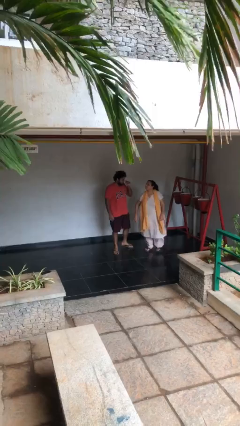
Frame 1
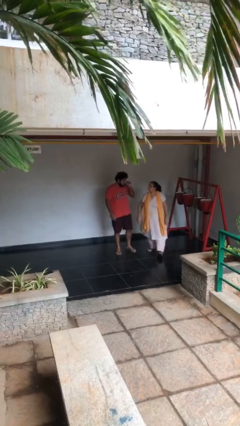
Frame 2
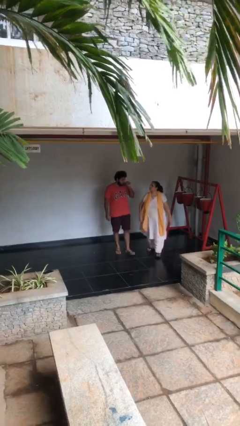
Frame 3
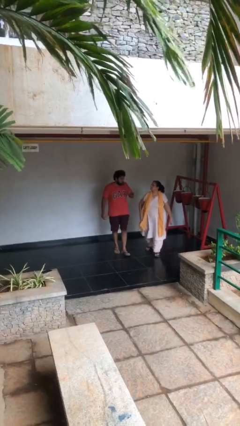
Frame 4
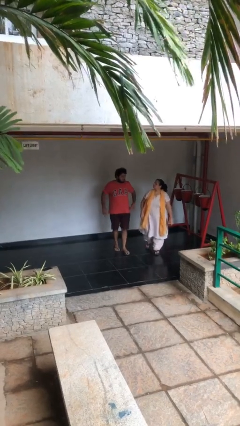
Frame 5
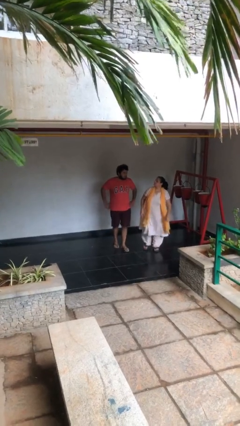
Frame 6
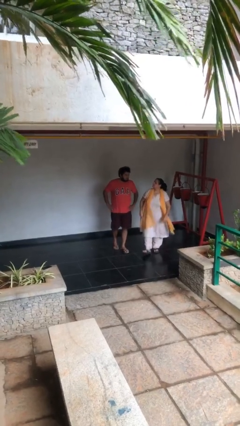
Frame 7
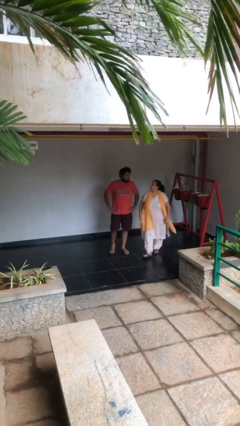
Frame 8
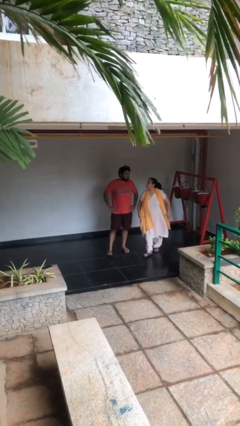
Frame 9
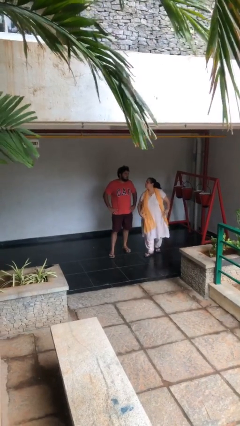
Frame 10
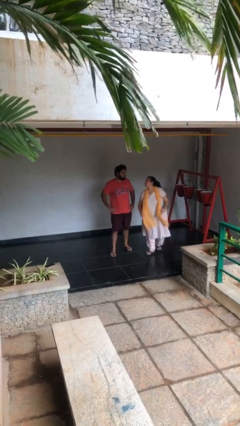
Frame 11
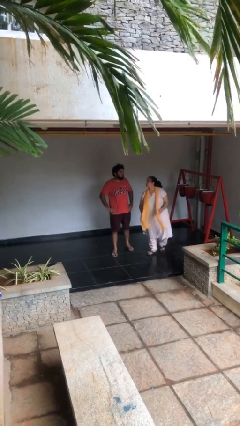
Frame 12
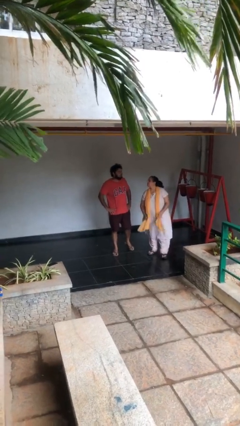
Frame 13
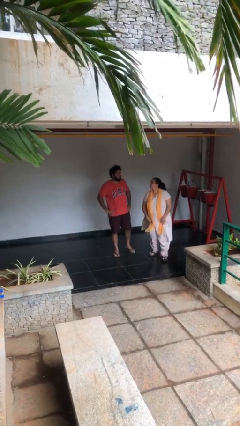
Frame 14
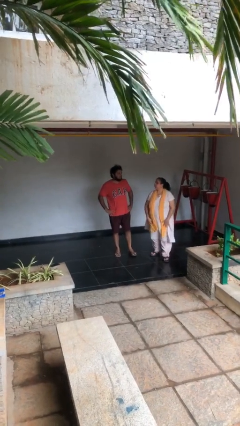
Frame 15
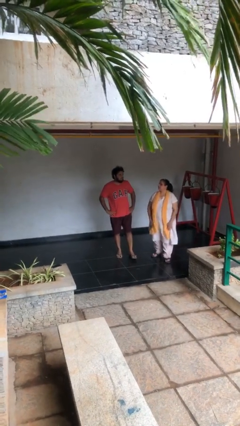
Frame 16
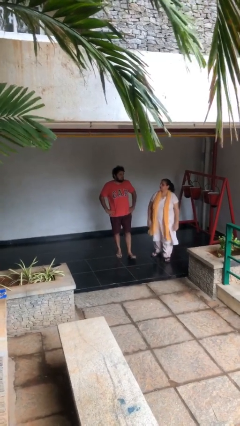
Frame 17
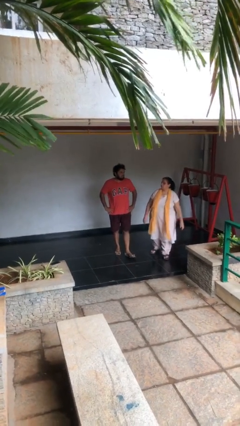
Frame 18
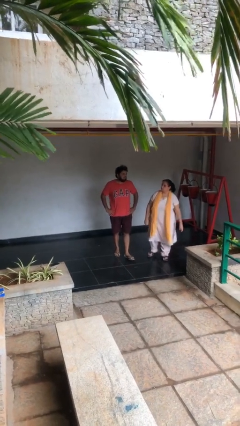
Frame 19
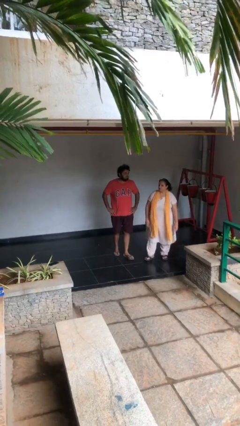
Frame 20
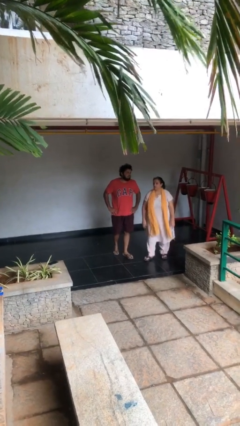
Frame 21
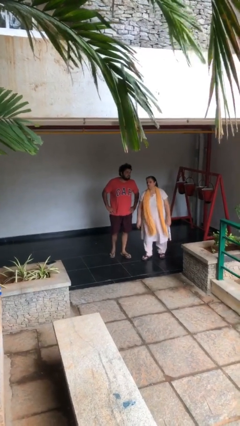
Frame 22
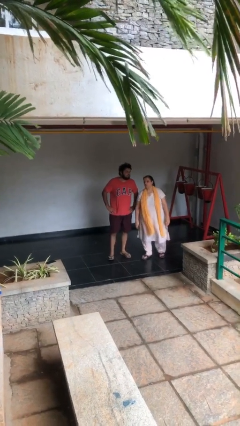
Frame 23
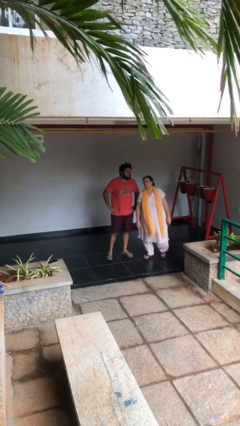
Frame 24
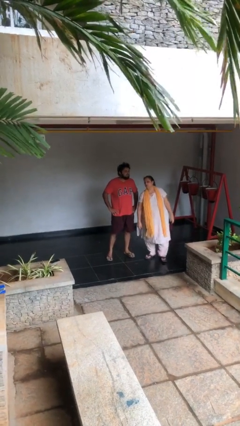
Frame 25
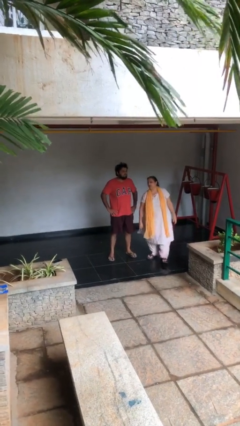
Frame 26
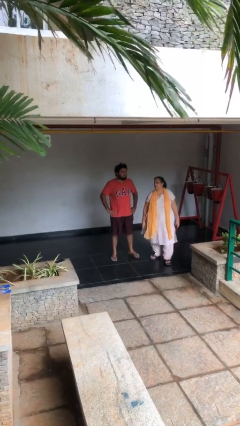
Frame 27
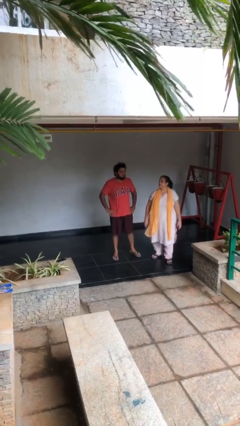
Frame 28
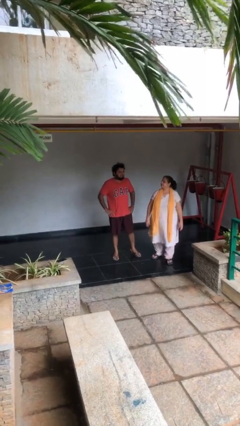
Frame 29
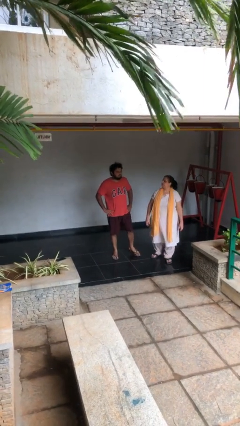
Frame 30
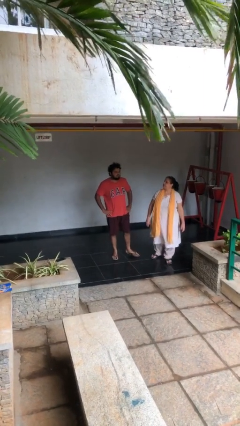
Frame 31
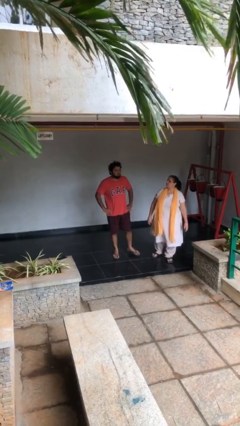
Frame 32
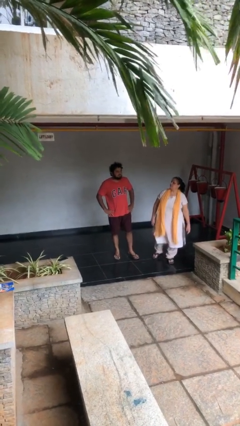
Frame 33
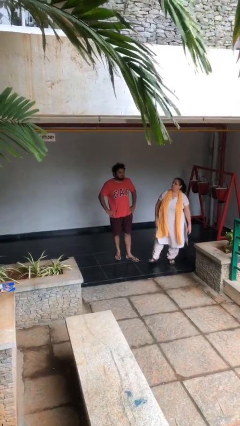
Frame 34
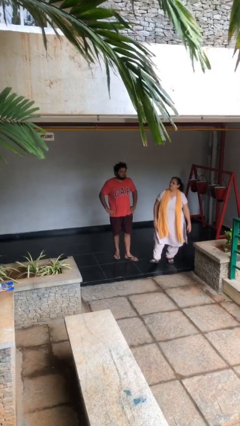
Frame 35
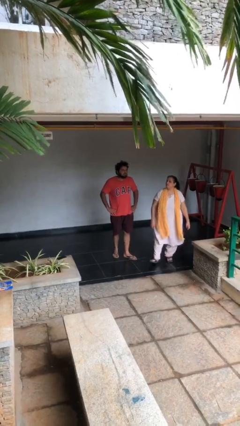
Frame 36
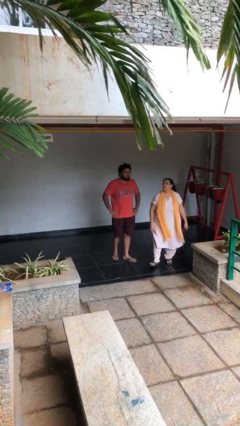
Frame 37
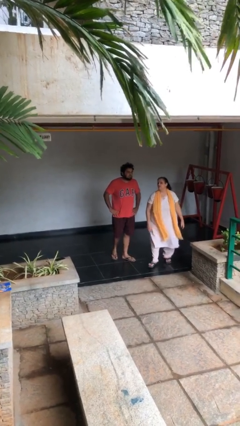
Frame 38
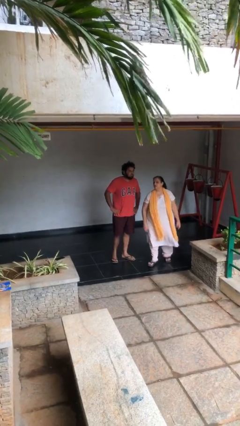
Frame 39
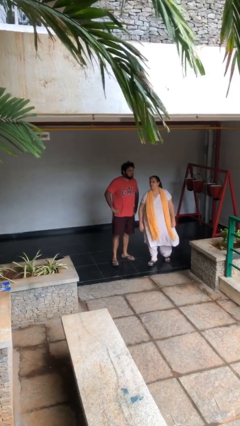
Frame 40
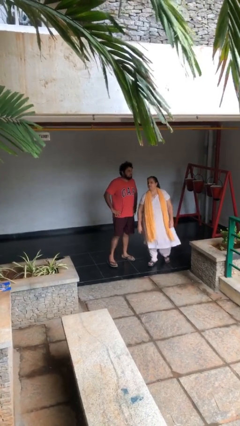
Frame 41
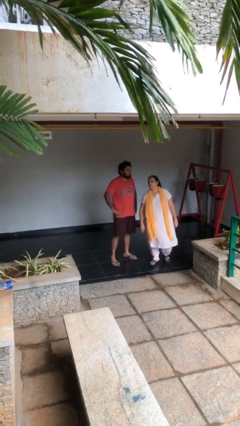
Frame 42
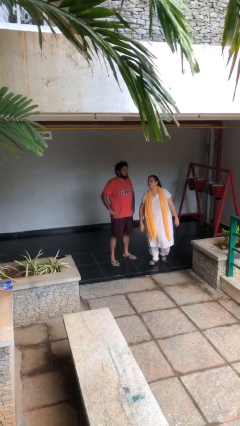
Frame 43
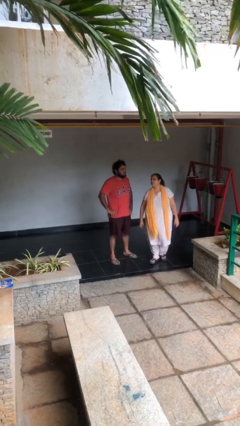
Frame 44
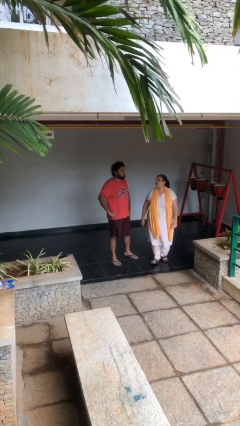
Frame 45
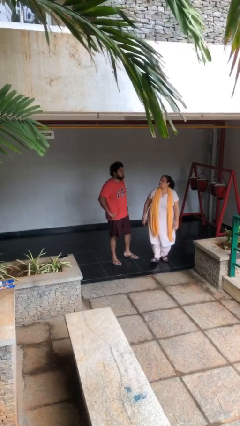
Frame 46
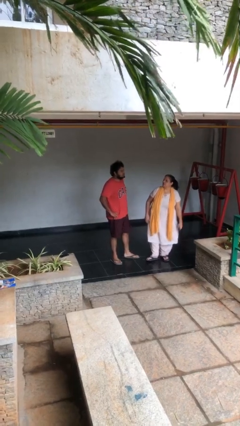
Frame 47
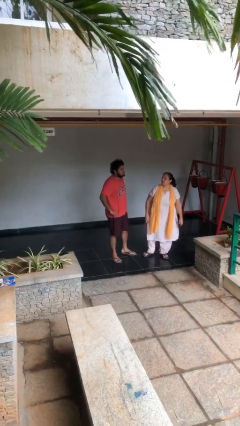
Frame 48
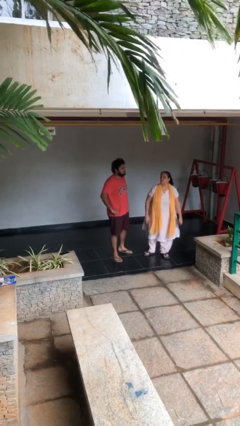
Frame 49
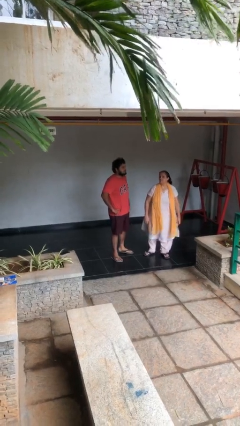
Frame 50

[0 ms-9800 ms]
person talks to person

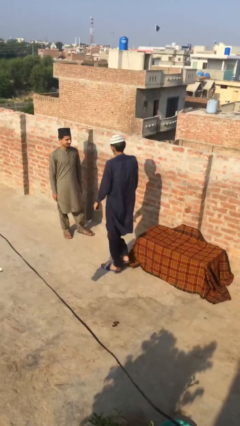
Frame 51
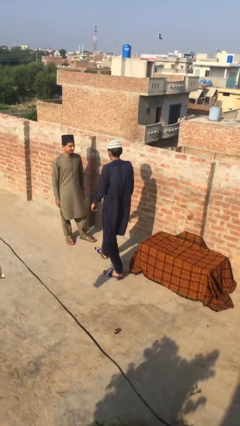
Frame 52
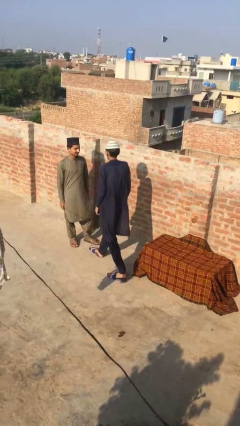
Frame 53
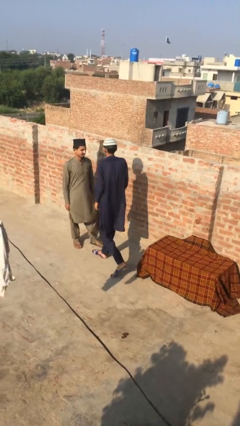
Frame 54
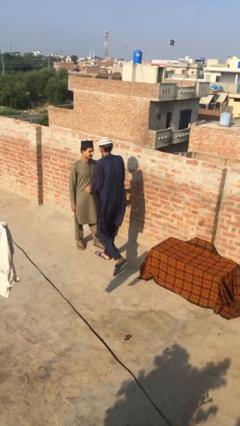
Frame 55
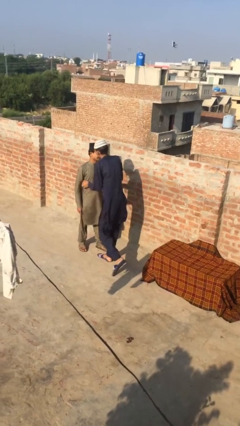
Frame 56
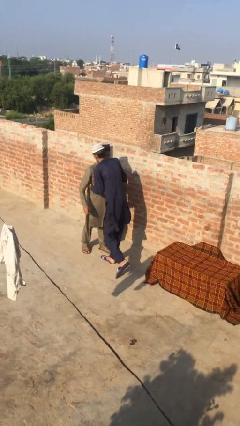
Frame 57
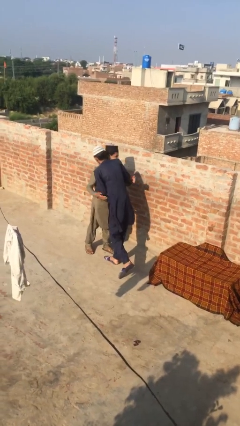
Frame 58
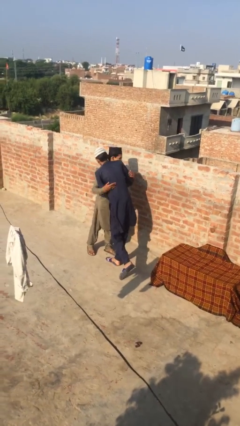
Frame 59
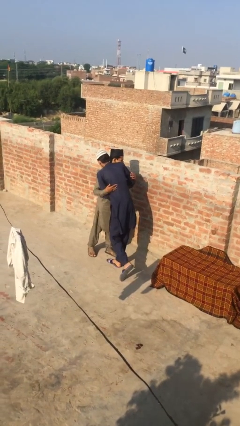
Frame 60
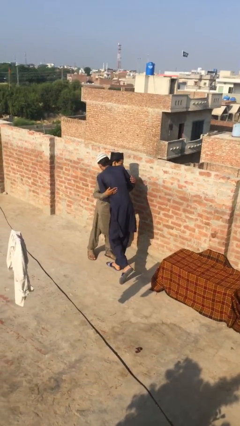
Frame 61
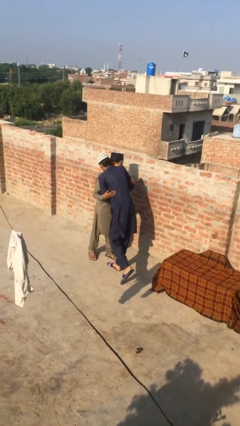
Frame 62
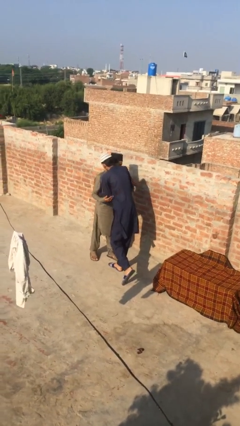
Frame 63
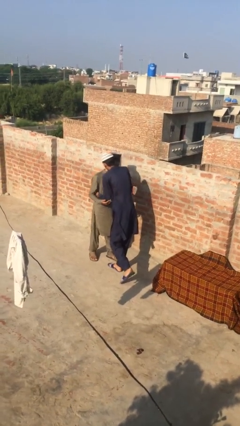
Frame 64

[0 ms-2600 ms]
person embraces person

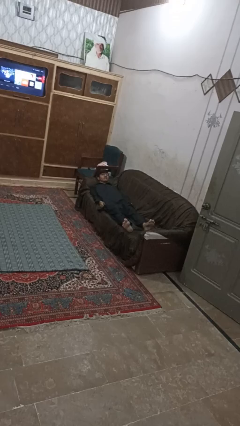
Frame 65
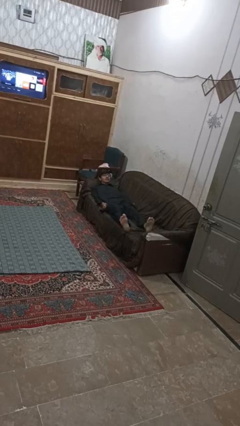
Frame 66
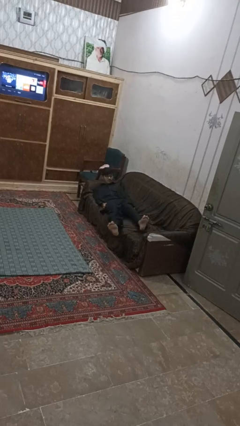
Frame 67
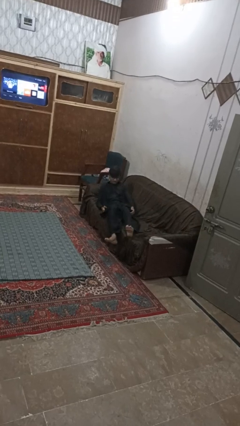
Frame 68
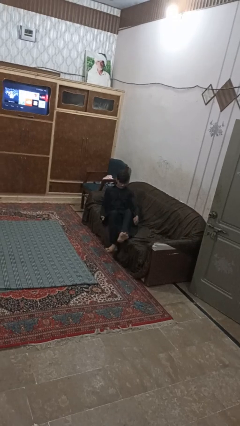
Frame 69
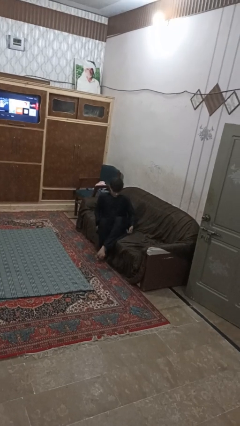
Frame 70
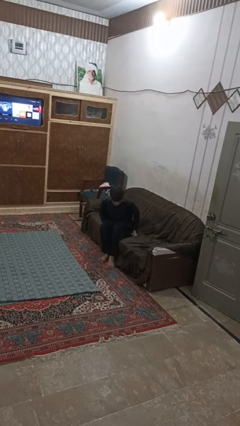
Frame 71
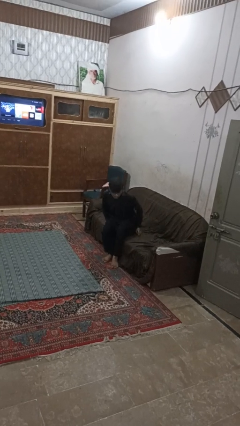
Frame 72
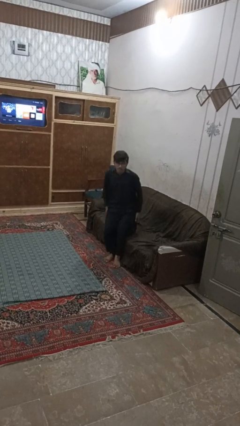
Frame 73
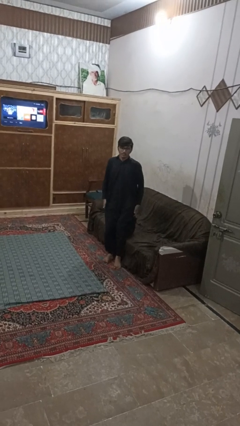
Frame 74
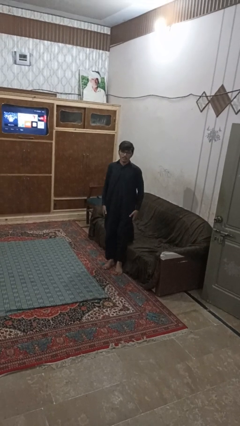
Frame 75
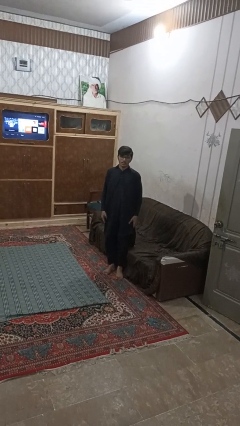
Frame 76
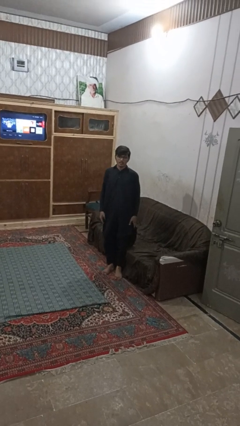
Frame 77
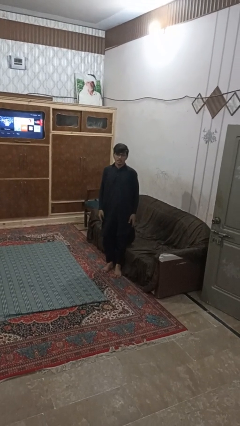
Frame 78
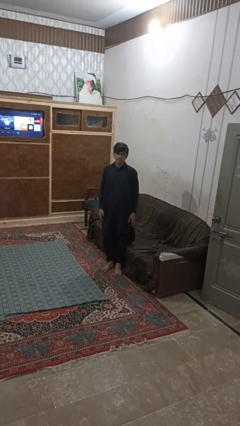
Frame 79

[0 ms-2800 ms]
person stands up

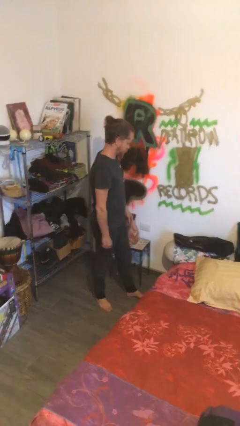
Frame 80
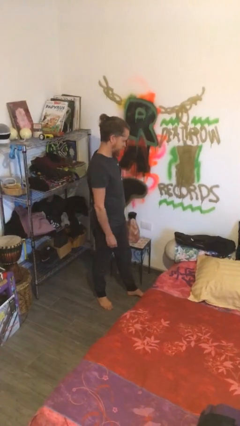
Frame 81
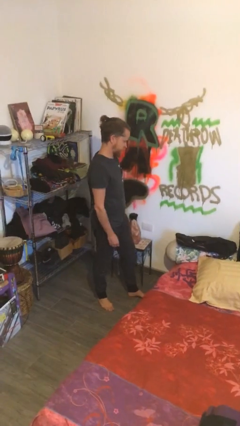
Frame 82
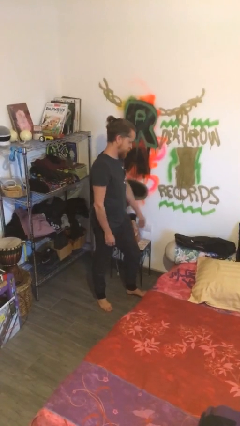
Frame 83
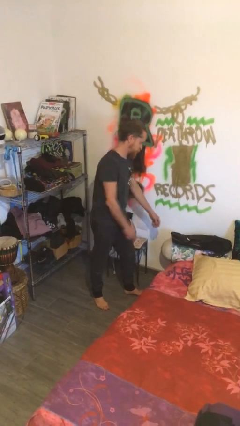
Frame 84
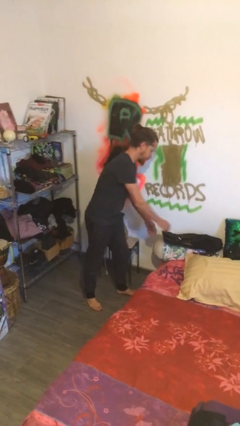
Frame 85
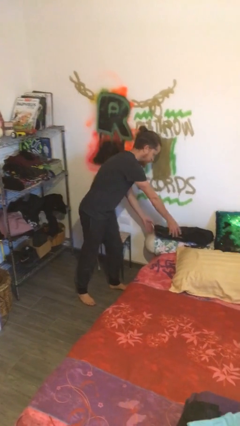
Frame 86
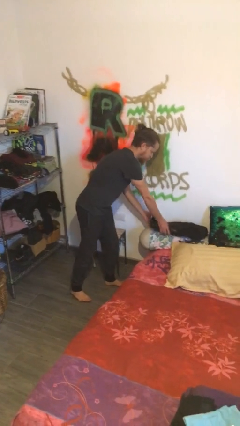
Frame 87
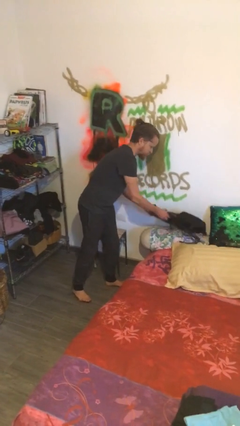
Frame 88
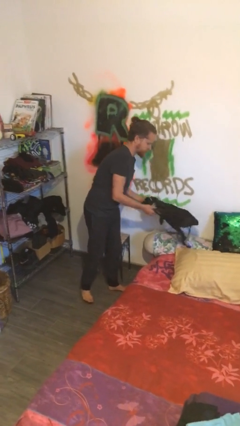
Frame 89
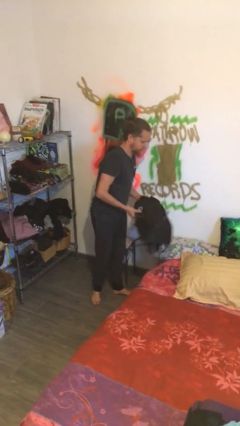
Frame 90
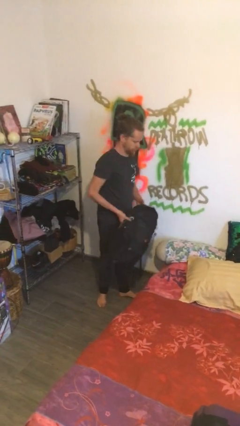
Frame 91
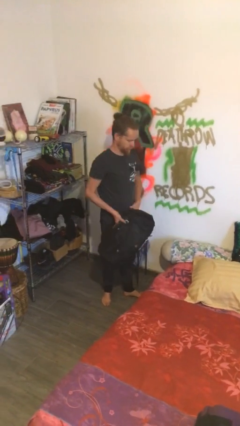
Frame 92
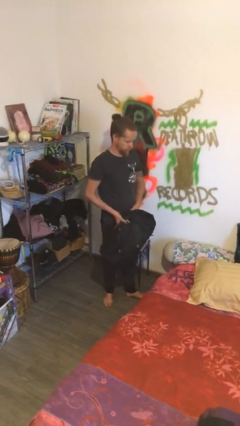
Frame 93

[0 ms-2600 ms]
person picks up object from bed
